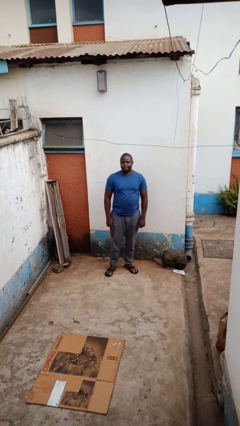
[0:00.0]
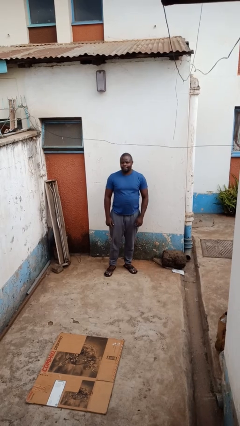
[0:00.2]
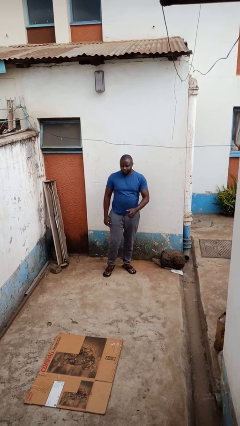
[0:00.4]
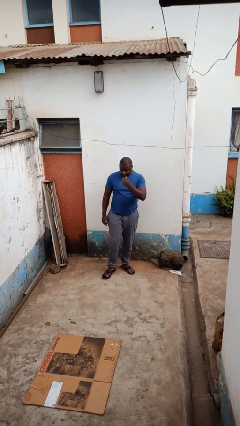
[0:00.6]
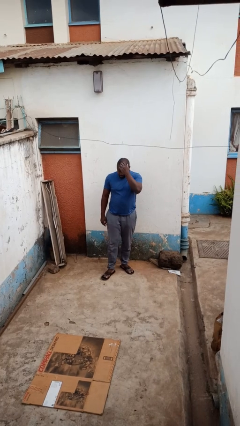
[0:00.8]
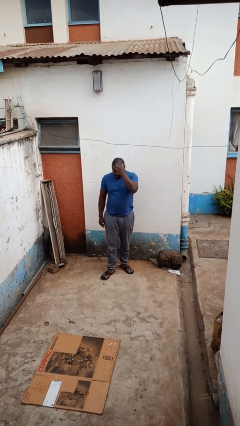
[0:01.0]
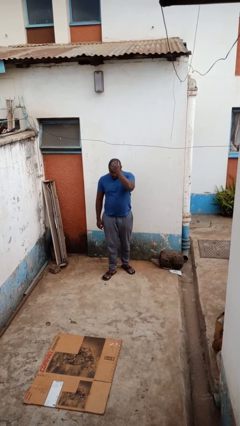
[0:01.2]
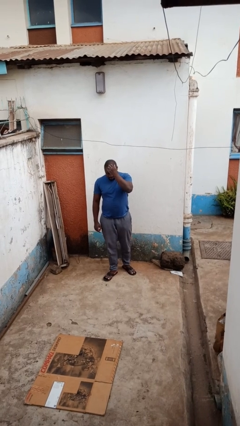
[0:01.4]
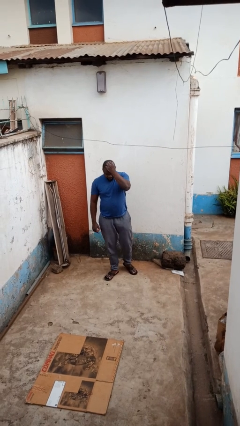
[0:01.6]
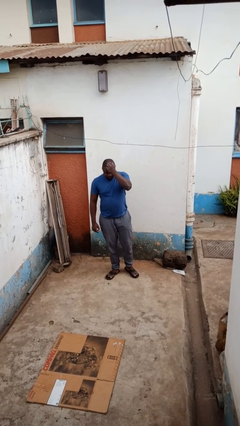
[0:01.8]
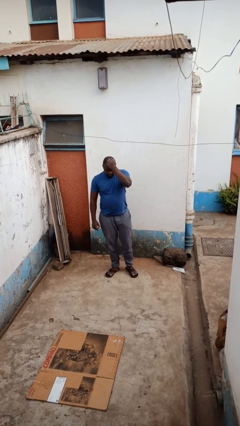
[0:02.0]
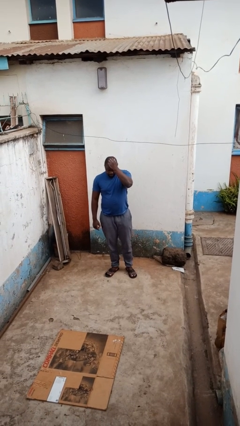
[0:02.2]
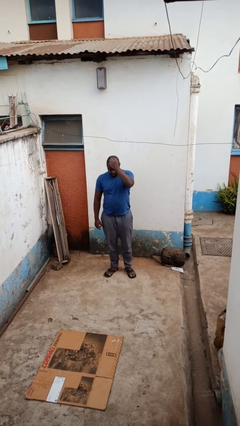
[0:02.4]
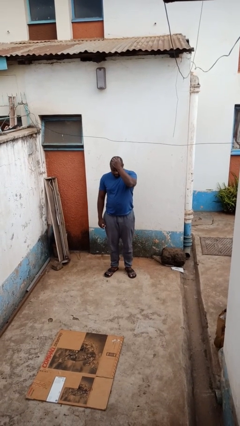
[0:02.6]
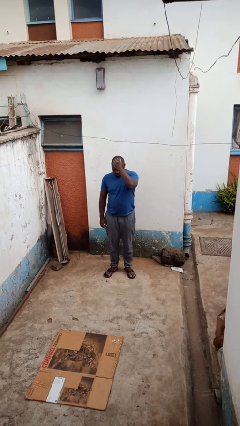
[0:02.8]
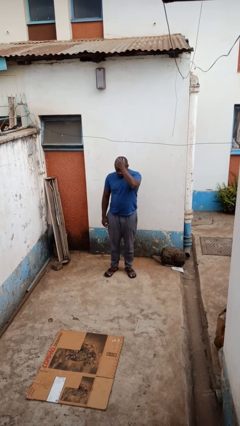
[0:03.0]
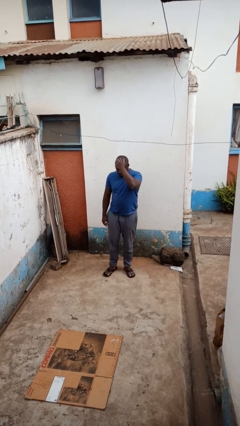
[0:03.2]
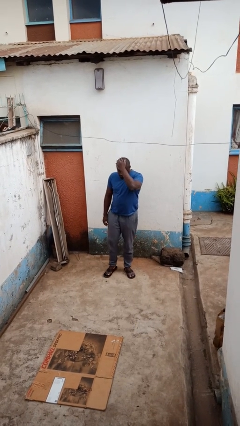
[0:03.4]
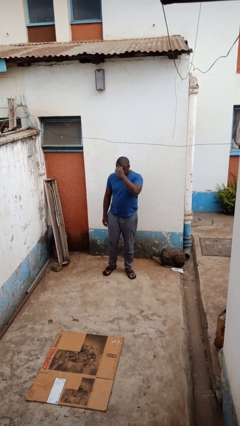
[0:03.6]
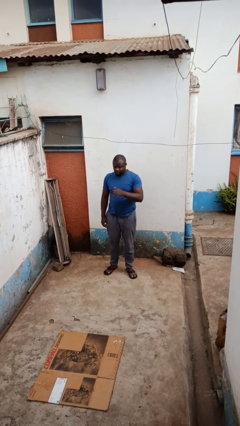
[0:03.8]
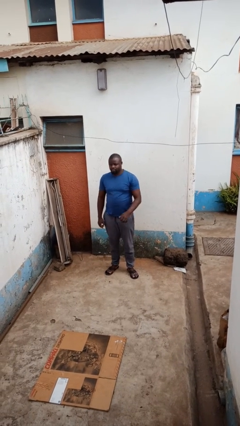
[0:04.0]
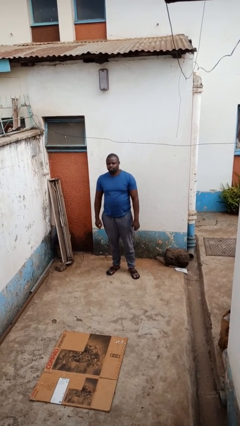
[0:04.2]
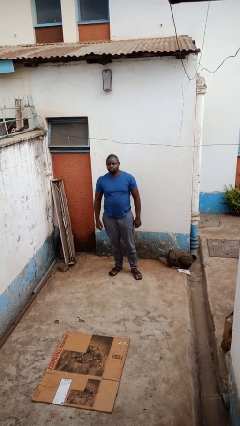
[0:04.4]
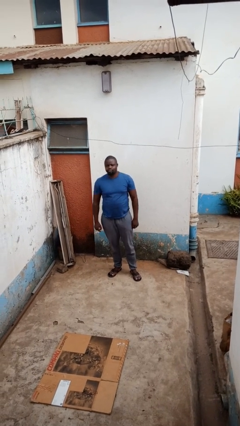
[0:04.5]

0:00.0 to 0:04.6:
person scratches face

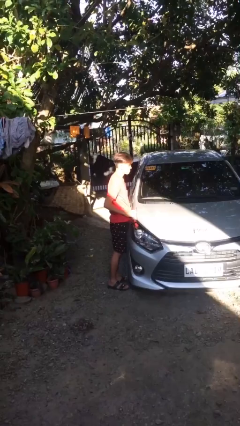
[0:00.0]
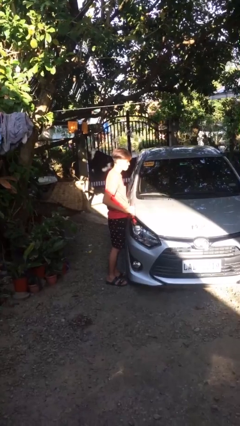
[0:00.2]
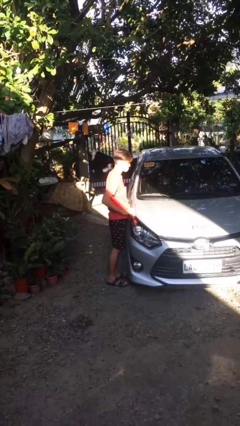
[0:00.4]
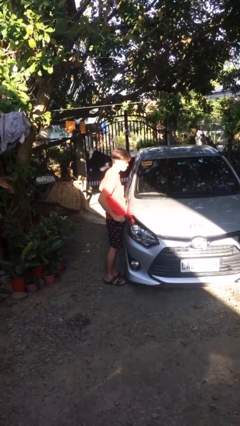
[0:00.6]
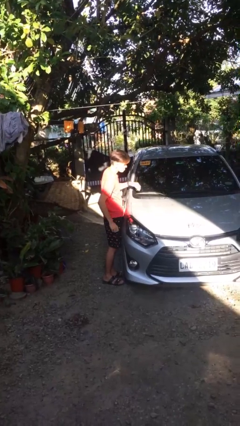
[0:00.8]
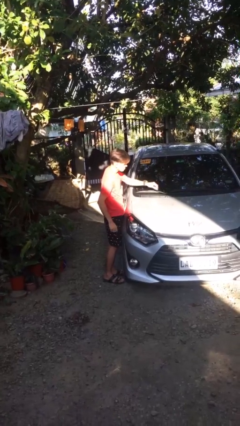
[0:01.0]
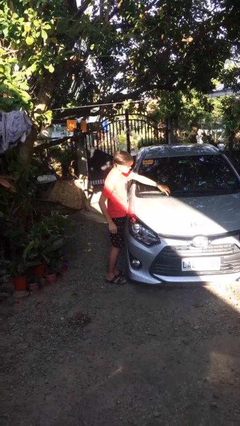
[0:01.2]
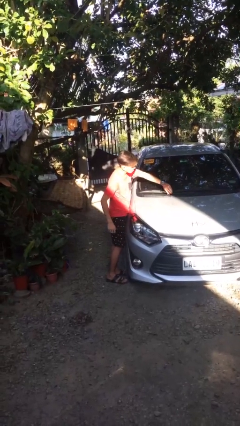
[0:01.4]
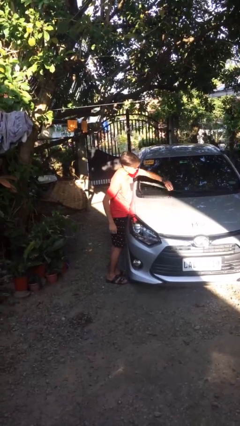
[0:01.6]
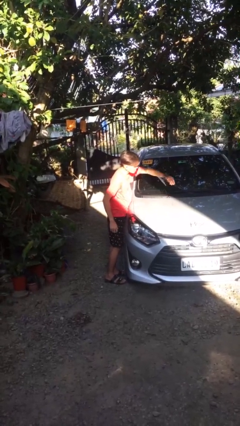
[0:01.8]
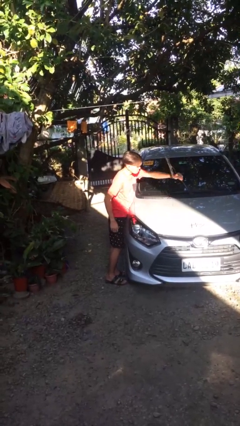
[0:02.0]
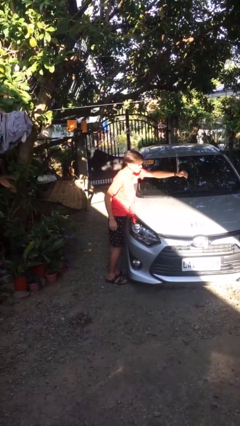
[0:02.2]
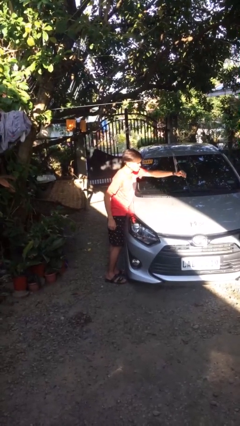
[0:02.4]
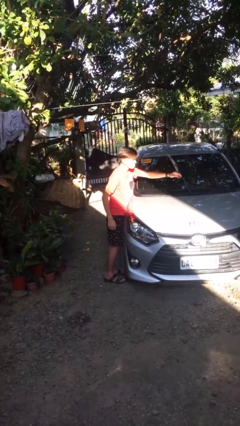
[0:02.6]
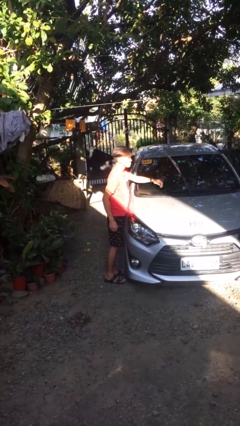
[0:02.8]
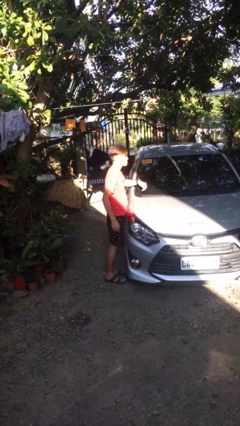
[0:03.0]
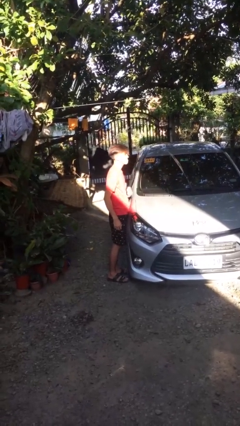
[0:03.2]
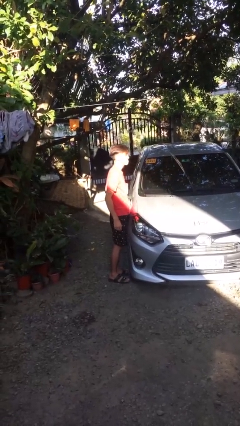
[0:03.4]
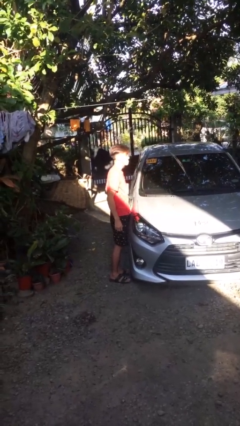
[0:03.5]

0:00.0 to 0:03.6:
person flips up car wipers

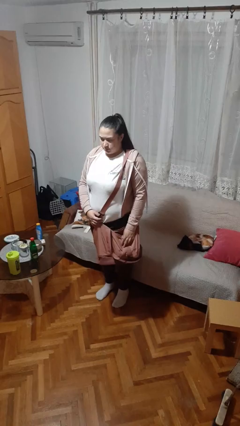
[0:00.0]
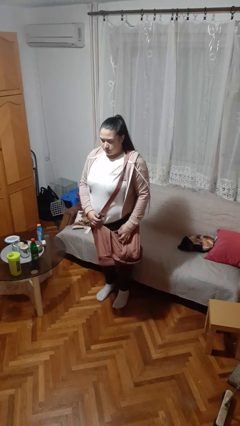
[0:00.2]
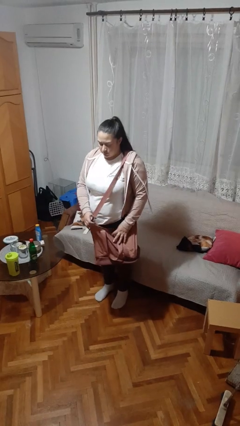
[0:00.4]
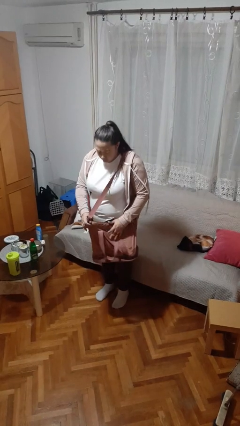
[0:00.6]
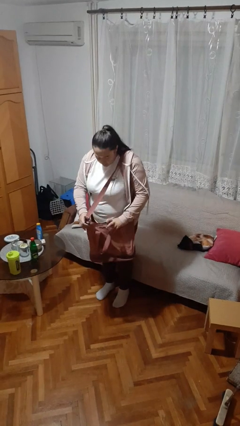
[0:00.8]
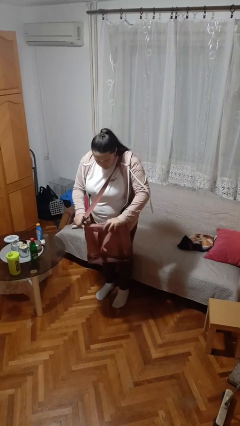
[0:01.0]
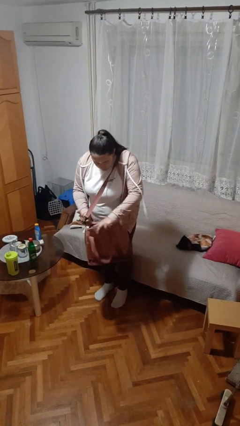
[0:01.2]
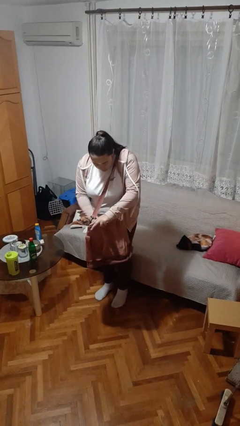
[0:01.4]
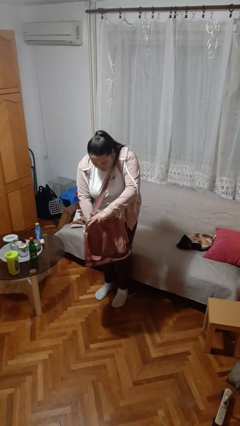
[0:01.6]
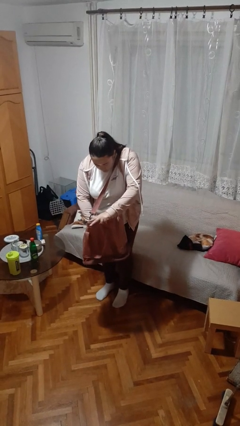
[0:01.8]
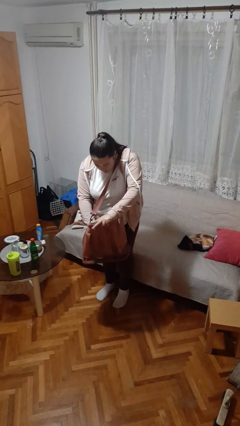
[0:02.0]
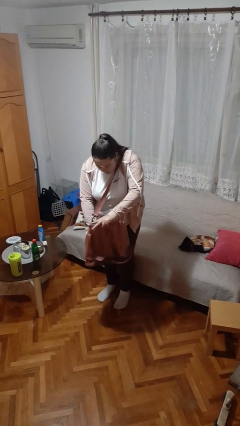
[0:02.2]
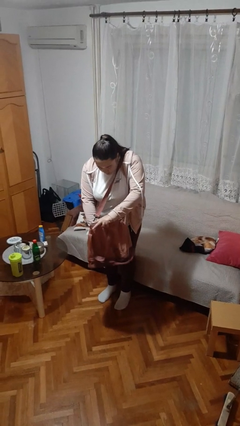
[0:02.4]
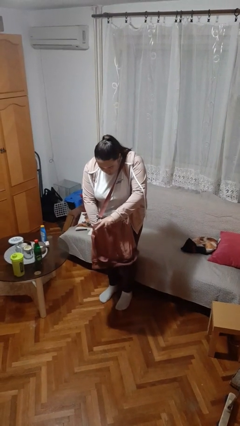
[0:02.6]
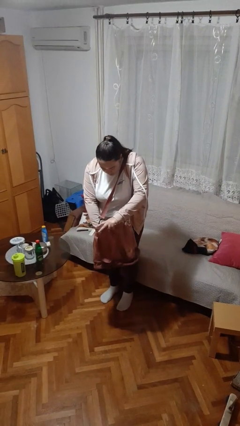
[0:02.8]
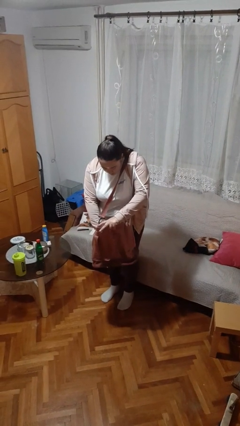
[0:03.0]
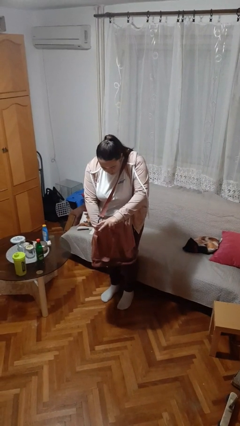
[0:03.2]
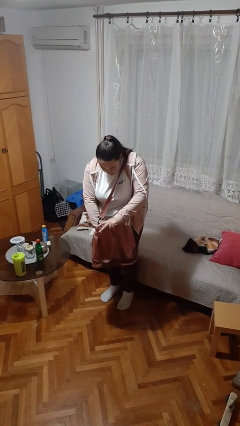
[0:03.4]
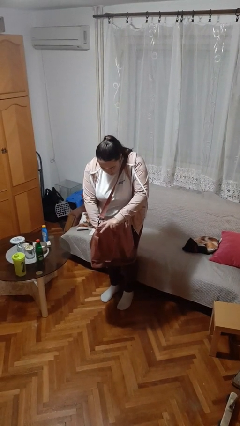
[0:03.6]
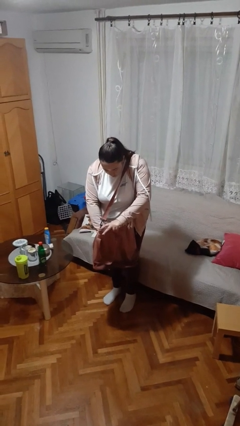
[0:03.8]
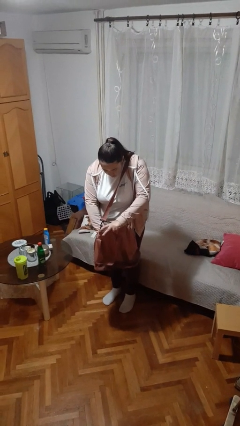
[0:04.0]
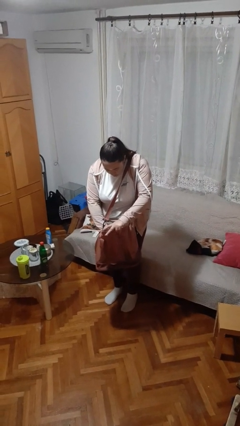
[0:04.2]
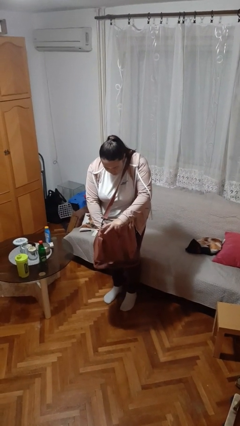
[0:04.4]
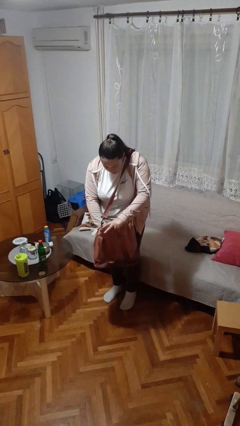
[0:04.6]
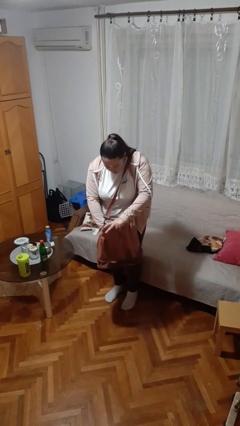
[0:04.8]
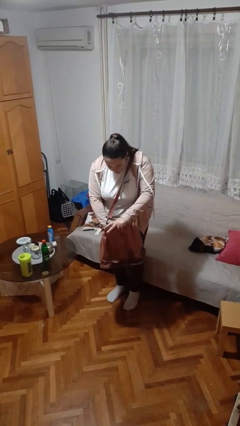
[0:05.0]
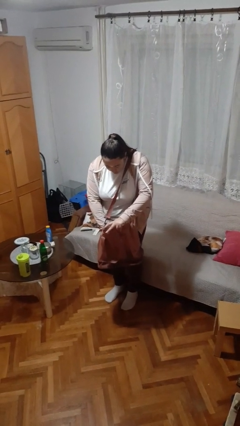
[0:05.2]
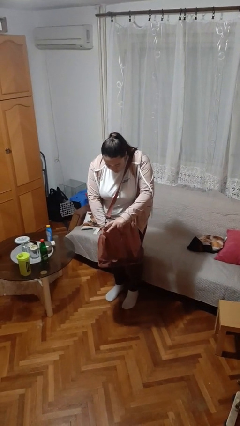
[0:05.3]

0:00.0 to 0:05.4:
person searches in purse

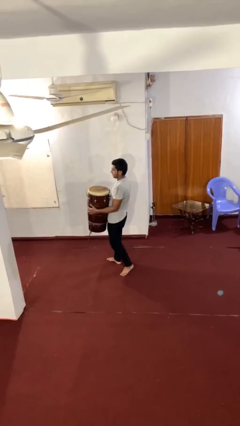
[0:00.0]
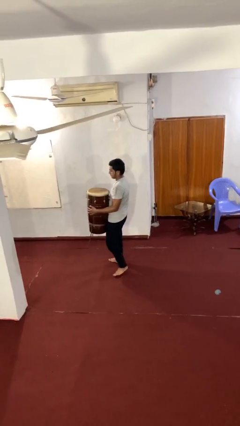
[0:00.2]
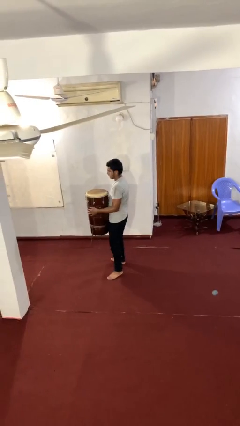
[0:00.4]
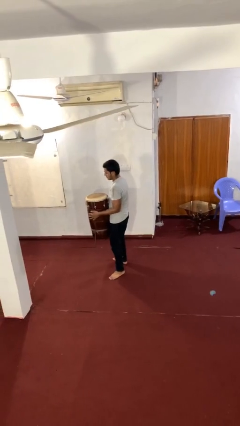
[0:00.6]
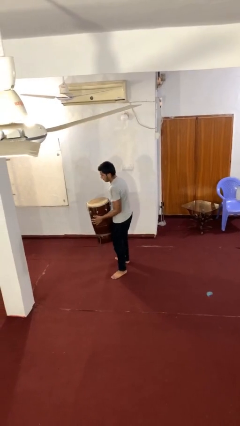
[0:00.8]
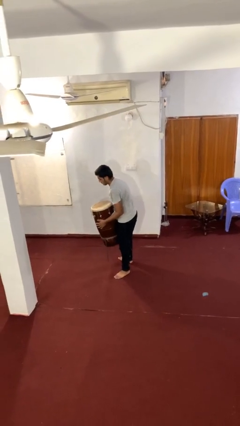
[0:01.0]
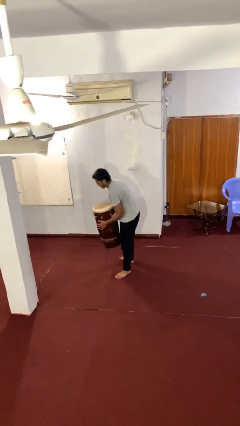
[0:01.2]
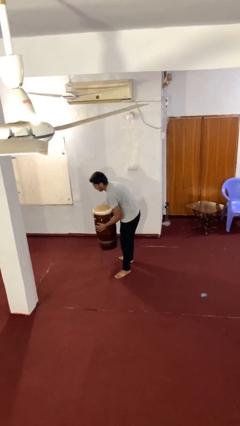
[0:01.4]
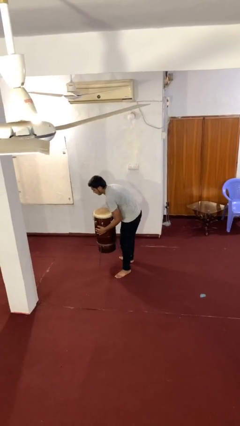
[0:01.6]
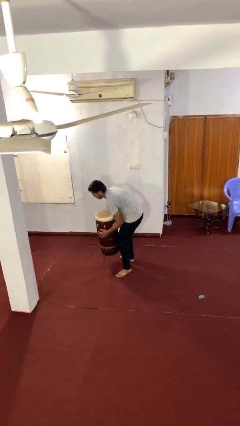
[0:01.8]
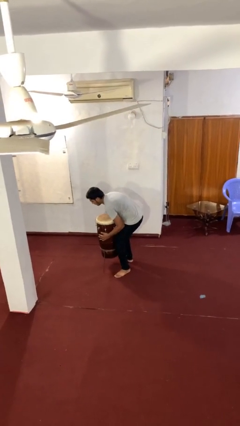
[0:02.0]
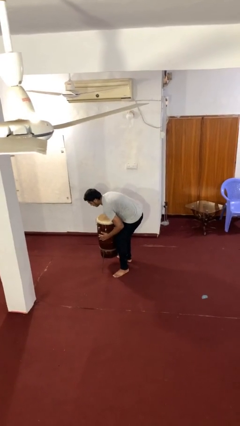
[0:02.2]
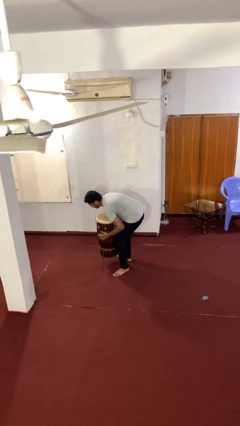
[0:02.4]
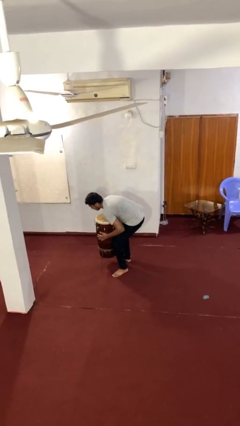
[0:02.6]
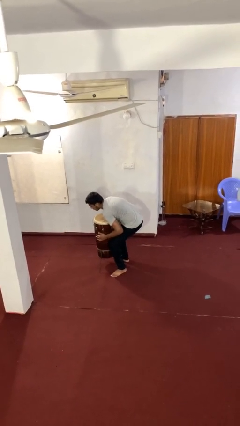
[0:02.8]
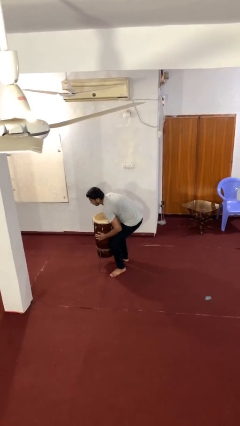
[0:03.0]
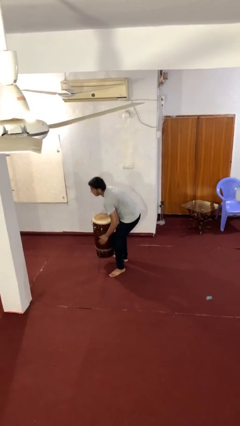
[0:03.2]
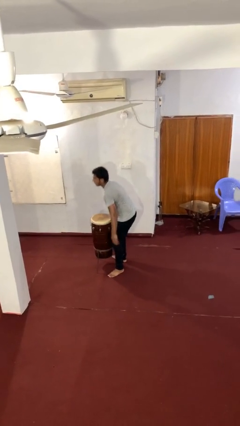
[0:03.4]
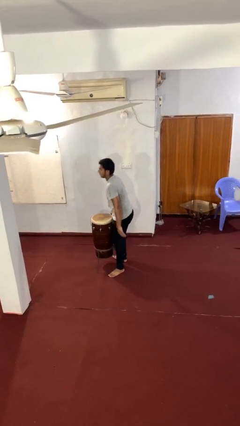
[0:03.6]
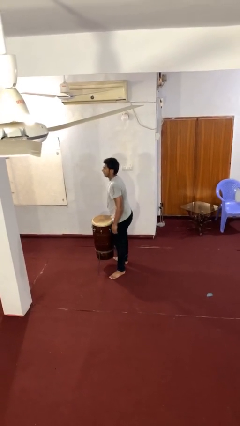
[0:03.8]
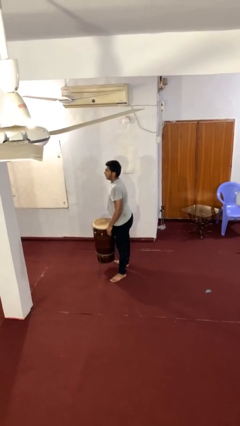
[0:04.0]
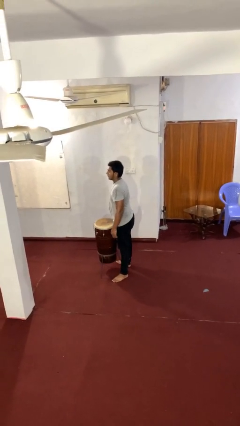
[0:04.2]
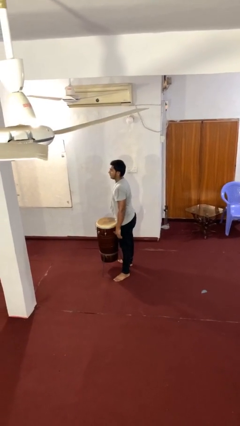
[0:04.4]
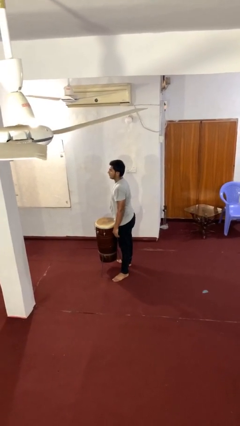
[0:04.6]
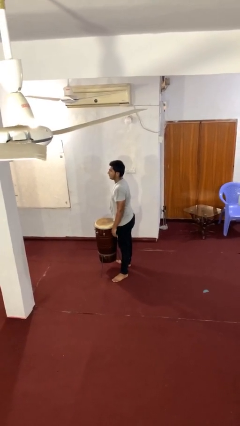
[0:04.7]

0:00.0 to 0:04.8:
person puts down object on floor
